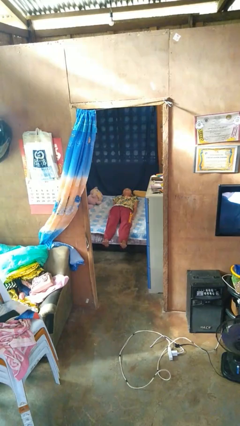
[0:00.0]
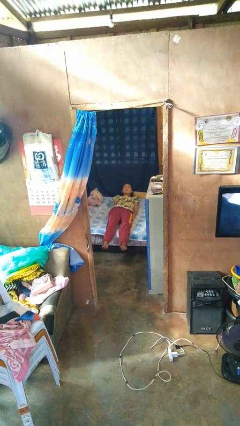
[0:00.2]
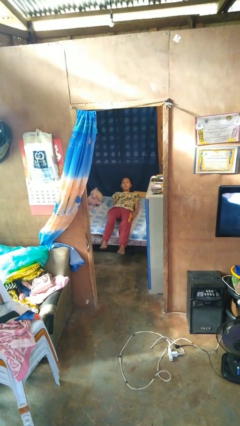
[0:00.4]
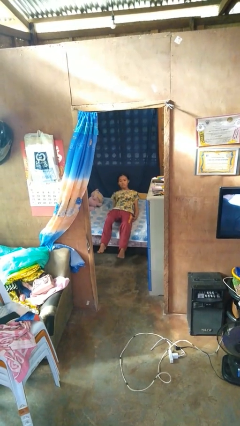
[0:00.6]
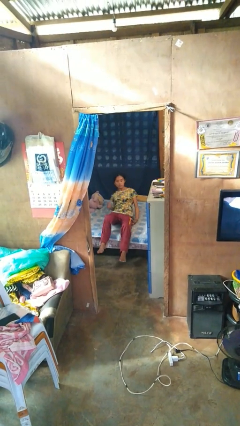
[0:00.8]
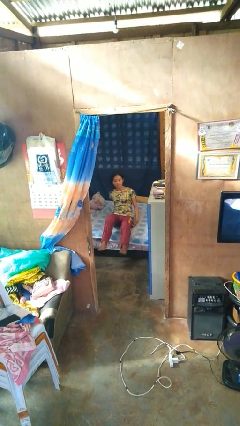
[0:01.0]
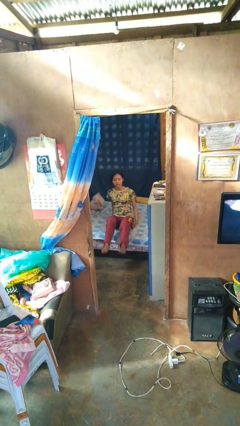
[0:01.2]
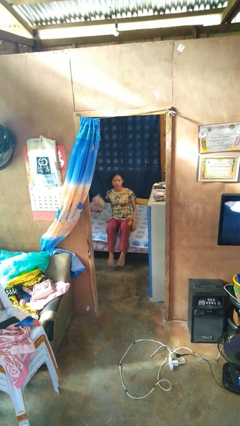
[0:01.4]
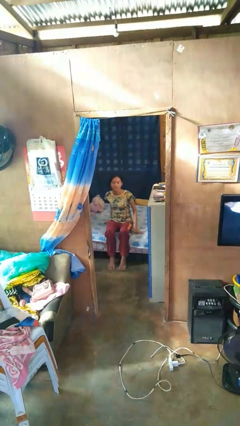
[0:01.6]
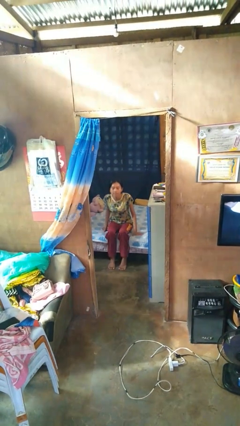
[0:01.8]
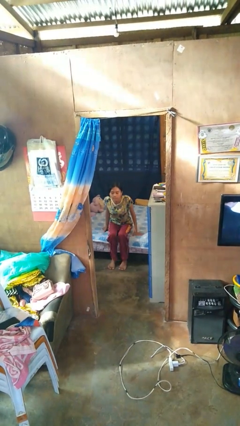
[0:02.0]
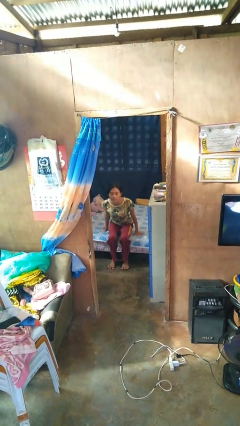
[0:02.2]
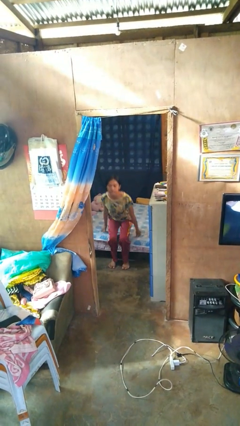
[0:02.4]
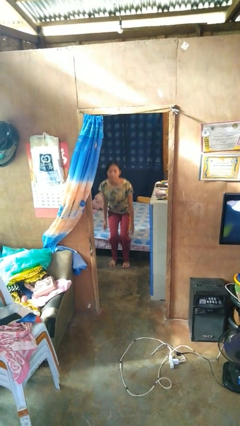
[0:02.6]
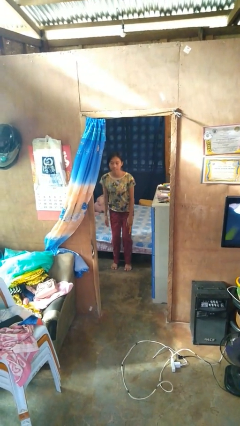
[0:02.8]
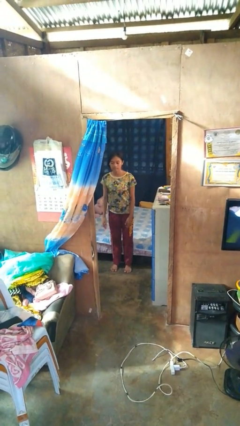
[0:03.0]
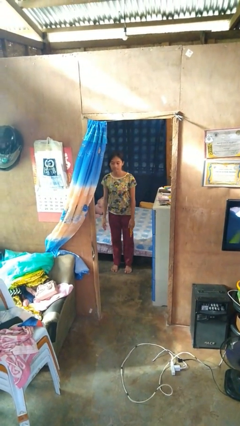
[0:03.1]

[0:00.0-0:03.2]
person stands up

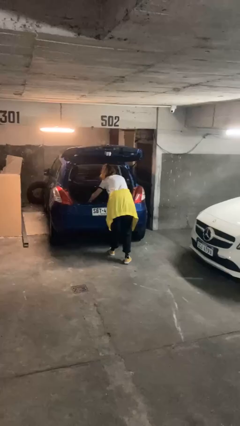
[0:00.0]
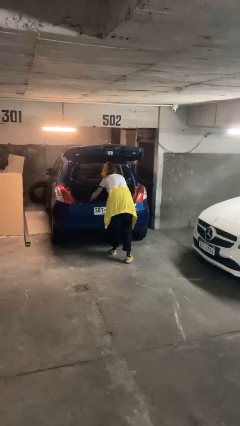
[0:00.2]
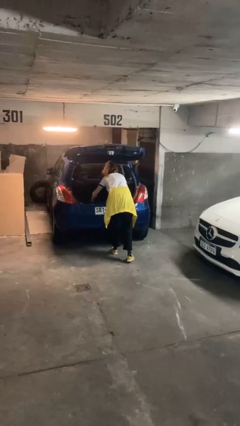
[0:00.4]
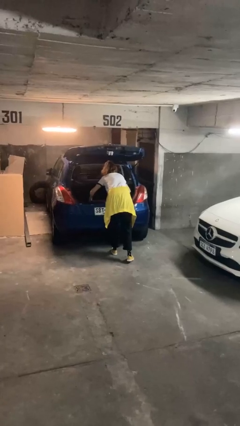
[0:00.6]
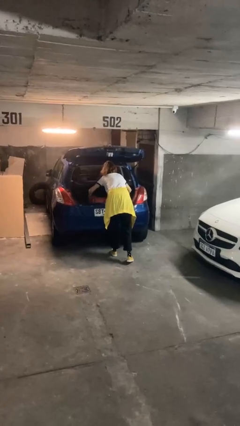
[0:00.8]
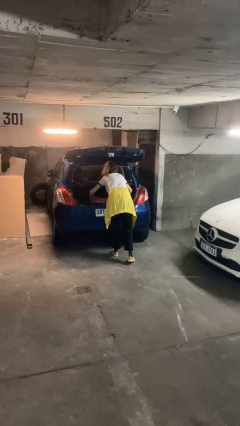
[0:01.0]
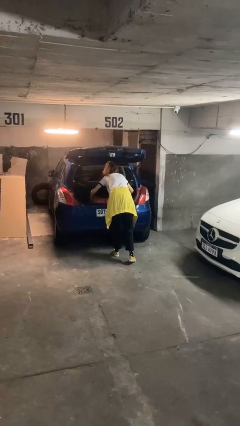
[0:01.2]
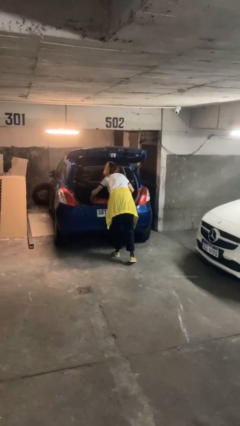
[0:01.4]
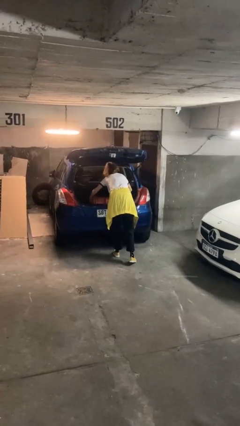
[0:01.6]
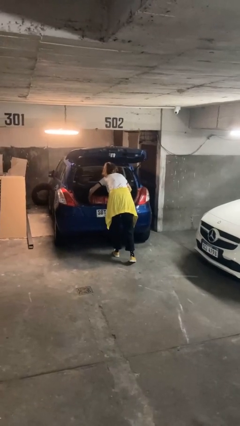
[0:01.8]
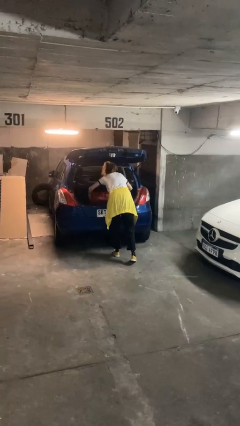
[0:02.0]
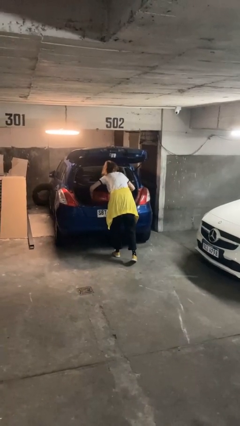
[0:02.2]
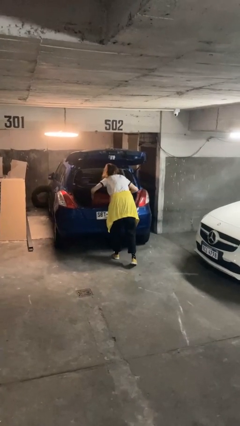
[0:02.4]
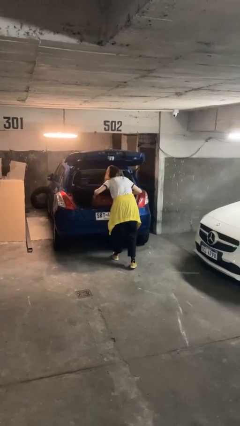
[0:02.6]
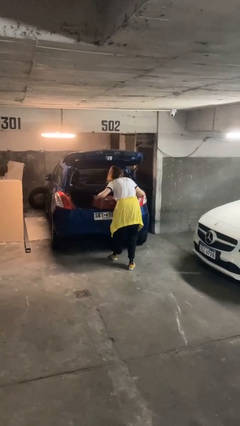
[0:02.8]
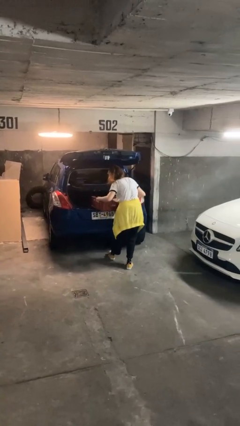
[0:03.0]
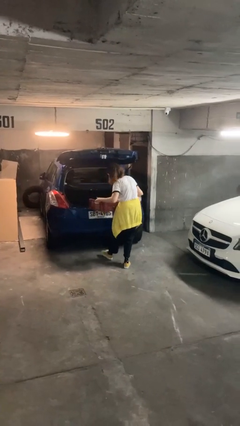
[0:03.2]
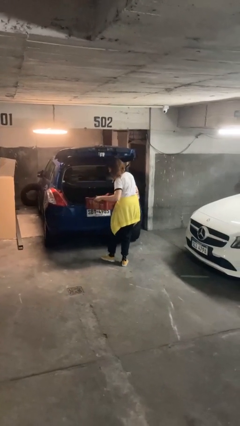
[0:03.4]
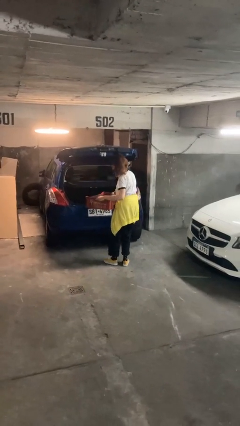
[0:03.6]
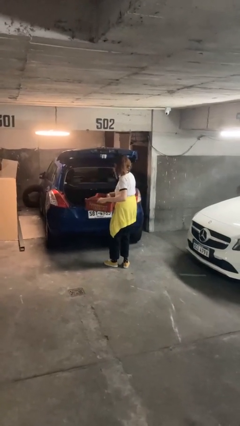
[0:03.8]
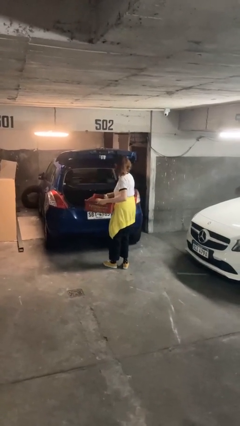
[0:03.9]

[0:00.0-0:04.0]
person unloads car

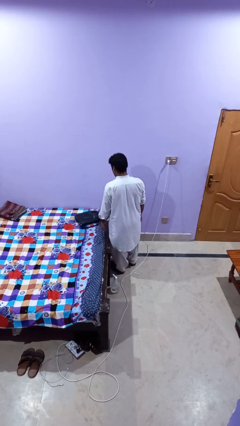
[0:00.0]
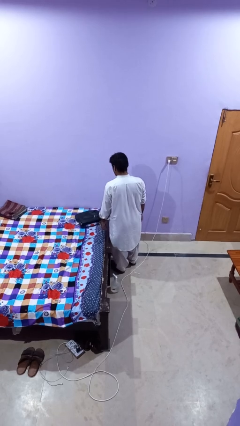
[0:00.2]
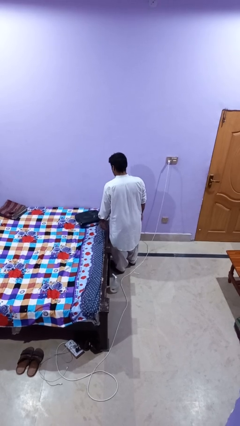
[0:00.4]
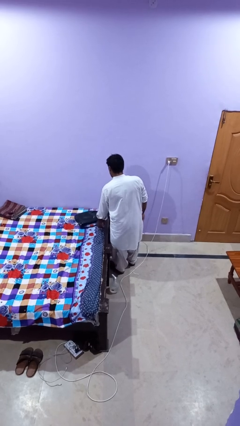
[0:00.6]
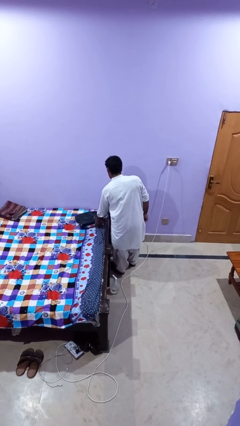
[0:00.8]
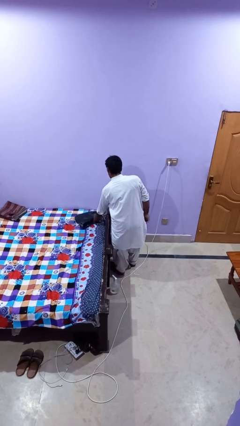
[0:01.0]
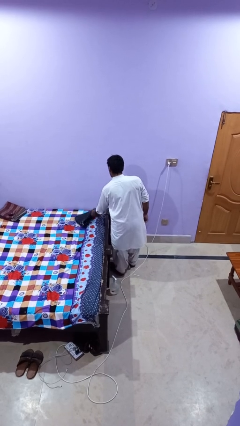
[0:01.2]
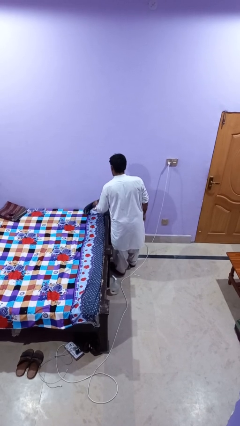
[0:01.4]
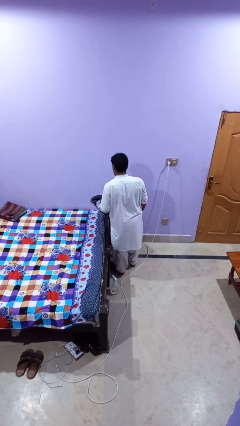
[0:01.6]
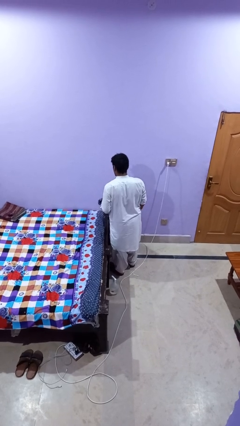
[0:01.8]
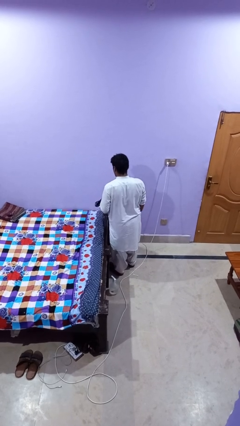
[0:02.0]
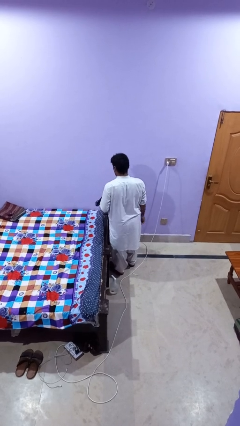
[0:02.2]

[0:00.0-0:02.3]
person picks up object from bed

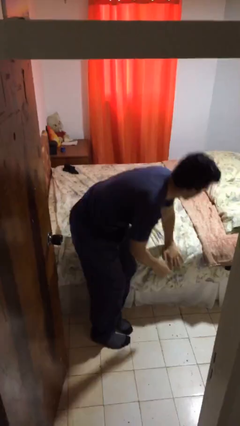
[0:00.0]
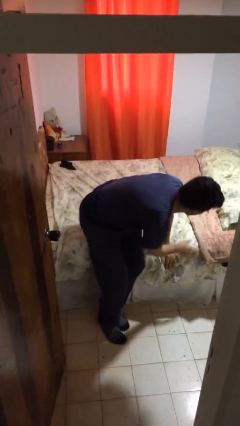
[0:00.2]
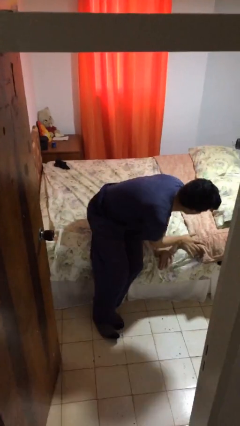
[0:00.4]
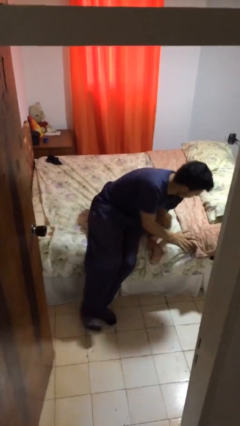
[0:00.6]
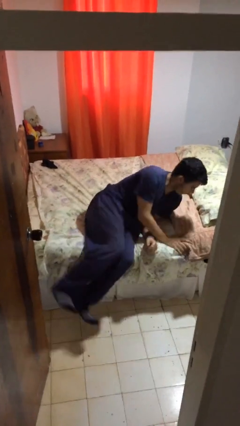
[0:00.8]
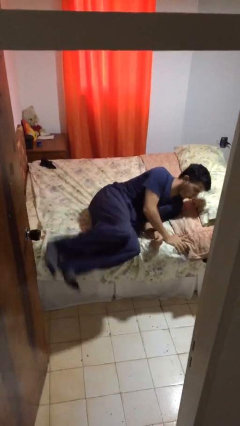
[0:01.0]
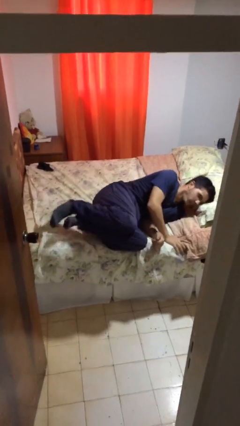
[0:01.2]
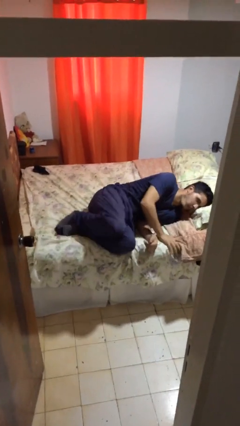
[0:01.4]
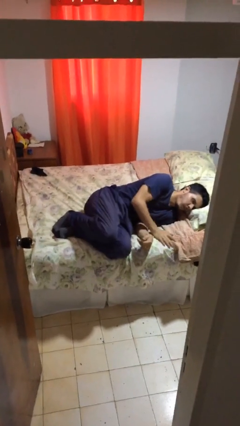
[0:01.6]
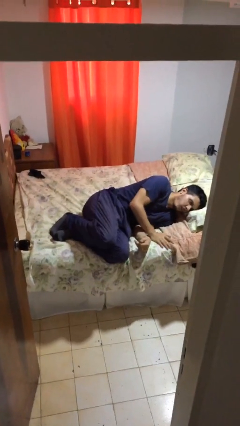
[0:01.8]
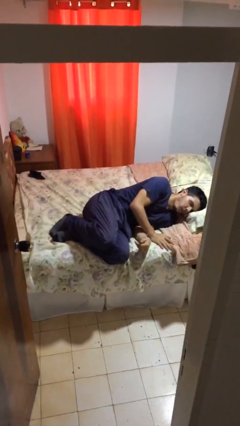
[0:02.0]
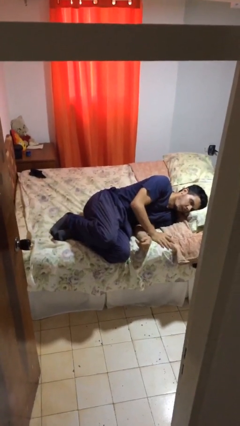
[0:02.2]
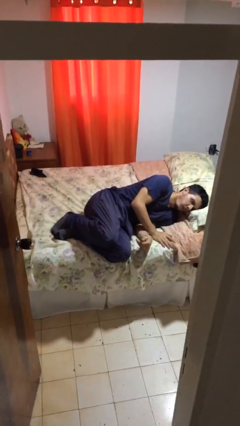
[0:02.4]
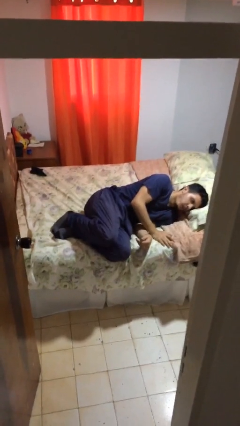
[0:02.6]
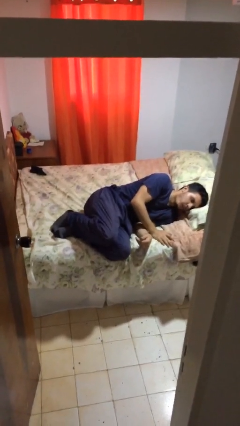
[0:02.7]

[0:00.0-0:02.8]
person lies down on bed

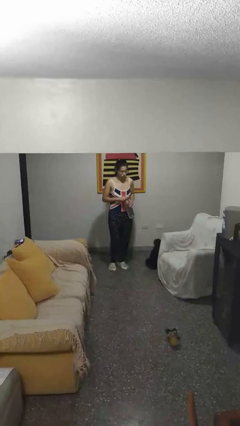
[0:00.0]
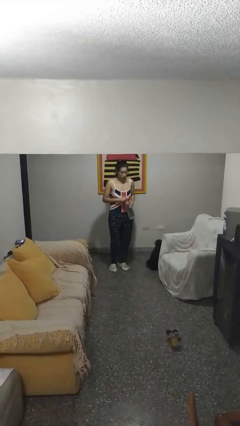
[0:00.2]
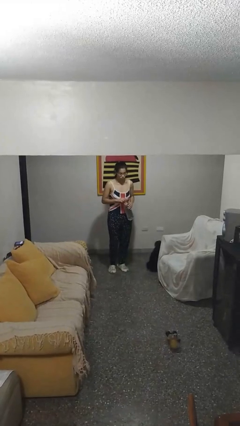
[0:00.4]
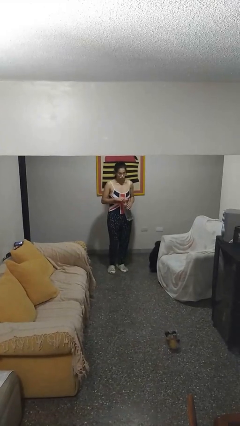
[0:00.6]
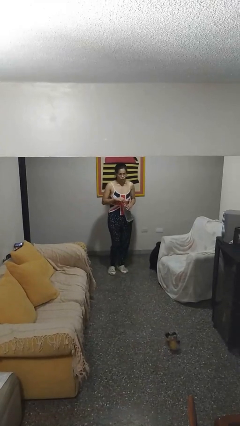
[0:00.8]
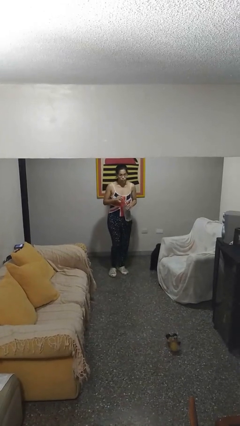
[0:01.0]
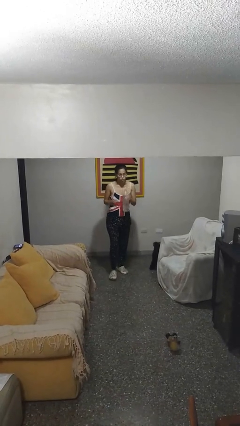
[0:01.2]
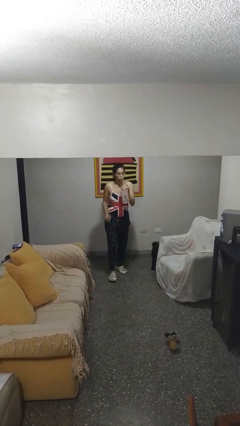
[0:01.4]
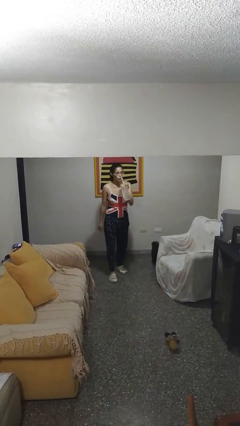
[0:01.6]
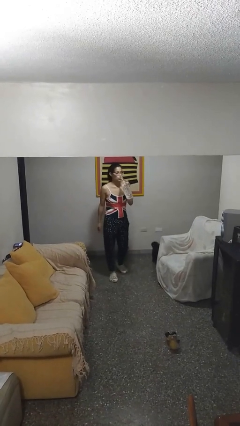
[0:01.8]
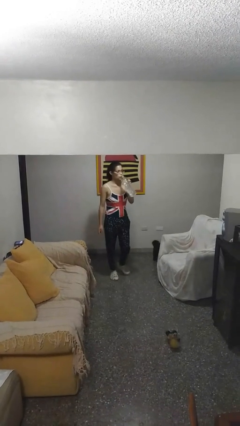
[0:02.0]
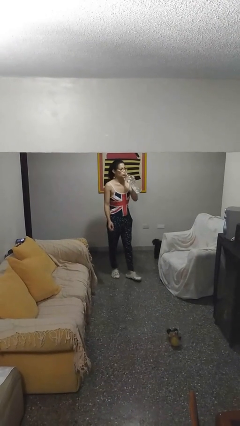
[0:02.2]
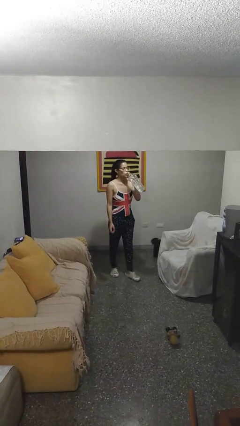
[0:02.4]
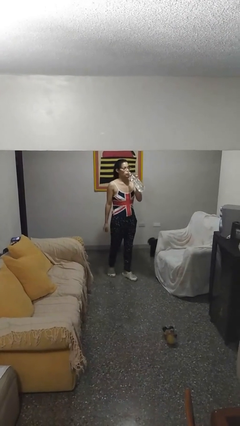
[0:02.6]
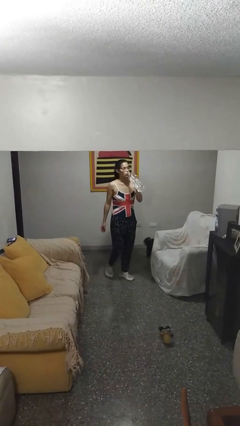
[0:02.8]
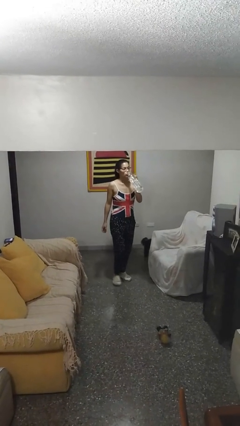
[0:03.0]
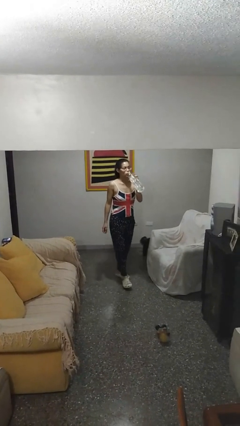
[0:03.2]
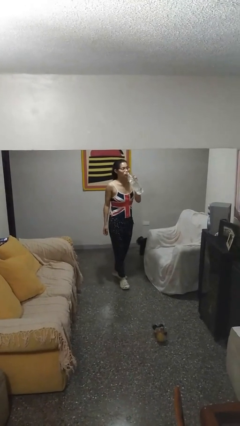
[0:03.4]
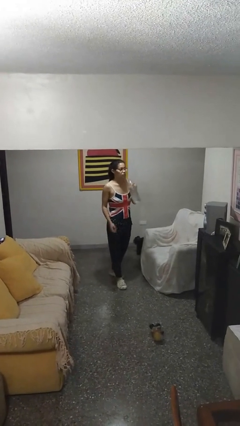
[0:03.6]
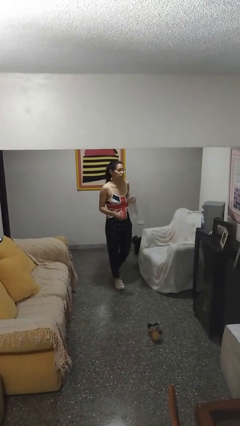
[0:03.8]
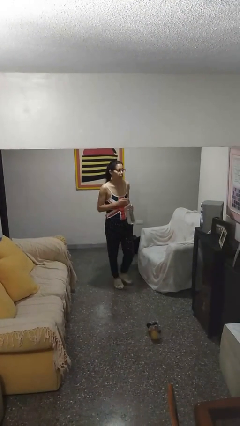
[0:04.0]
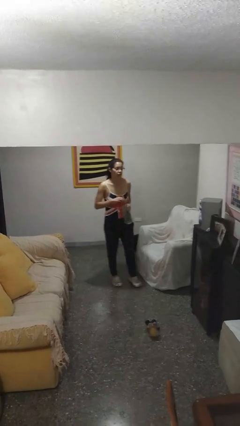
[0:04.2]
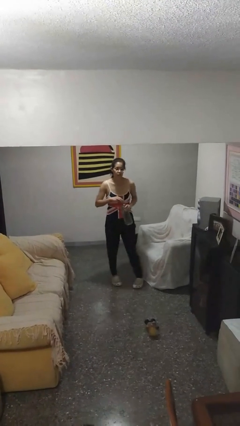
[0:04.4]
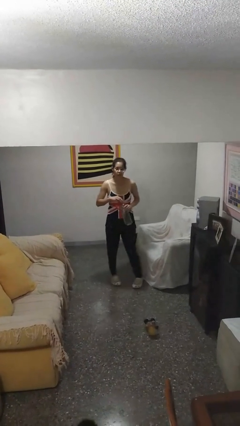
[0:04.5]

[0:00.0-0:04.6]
person drinks from bottle

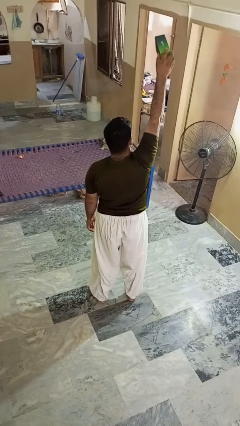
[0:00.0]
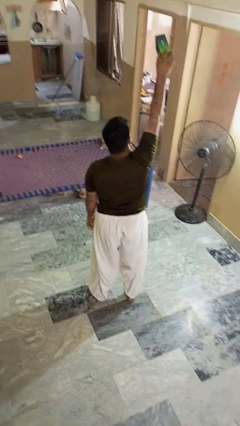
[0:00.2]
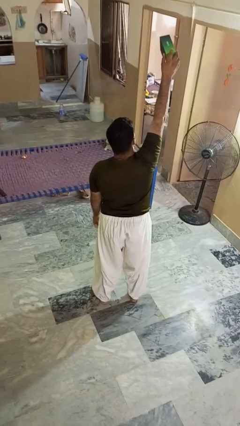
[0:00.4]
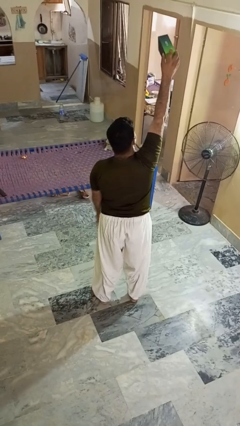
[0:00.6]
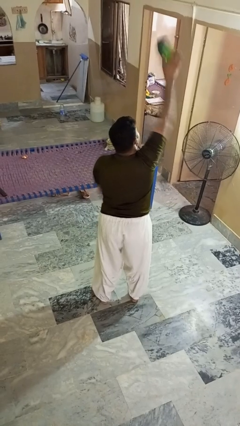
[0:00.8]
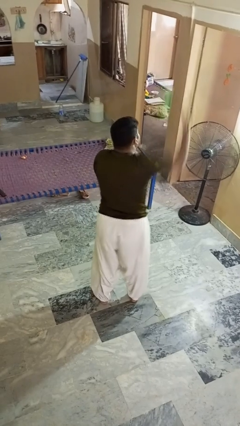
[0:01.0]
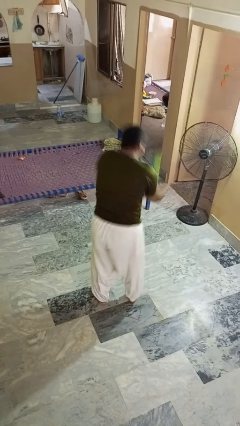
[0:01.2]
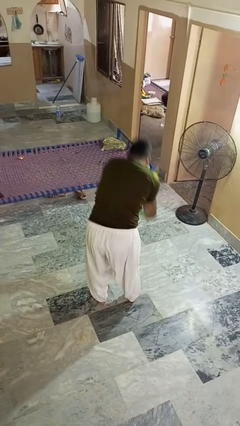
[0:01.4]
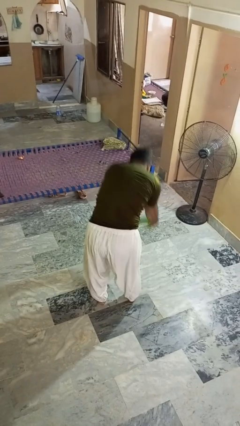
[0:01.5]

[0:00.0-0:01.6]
person drops object
